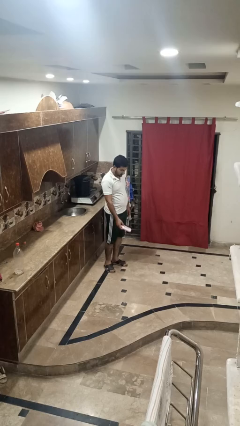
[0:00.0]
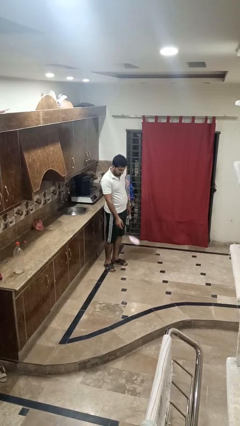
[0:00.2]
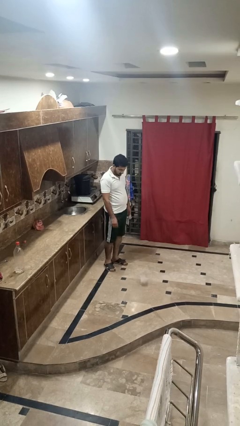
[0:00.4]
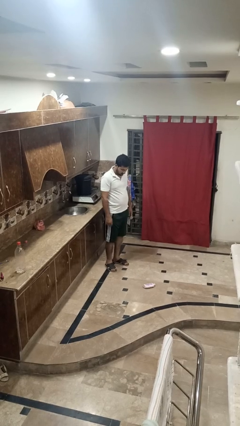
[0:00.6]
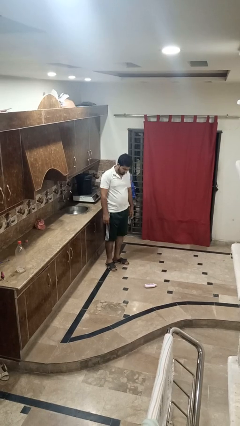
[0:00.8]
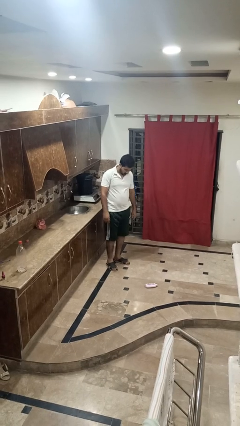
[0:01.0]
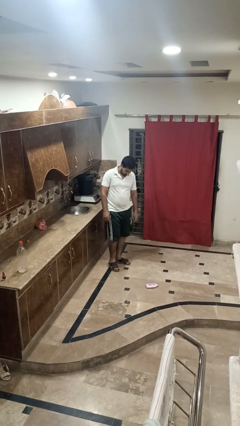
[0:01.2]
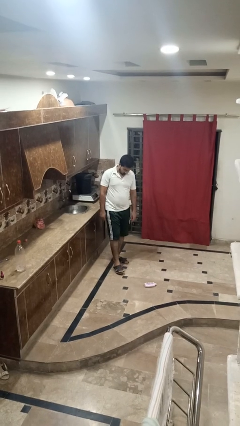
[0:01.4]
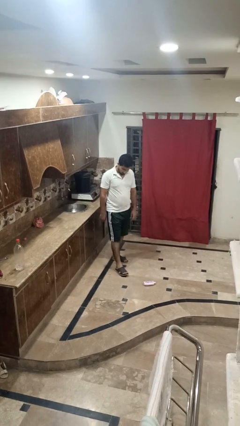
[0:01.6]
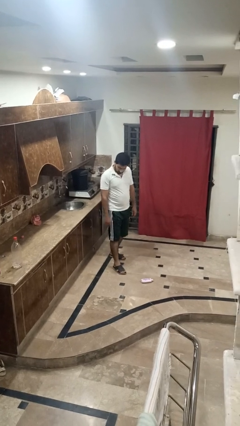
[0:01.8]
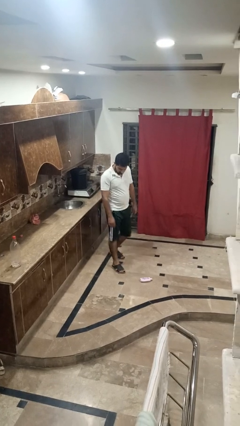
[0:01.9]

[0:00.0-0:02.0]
person throws object to ground

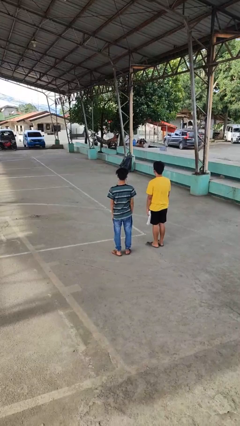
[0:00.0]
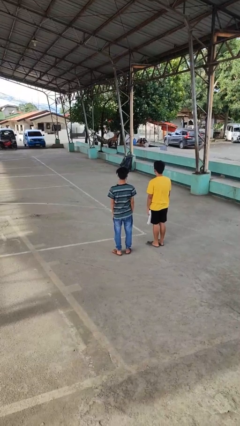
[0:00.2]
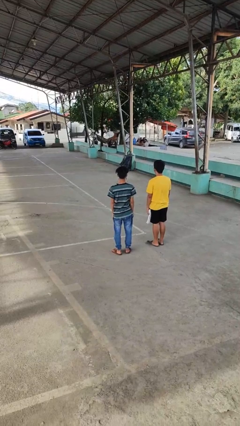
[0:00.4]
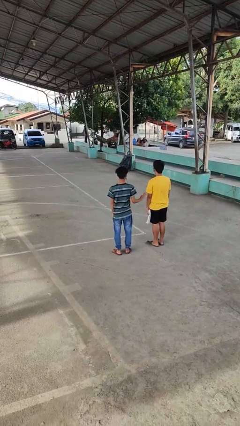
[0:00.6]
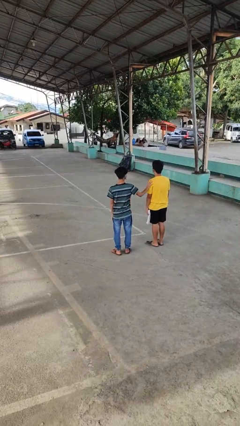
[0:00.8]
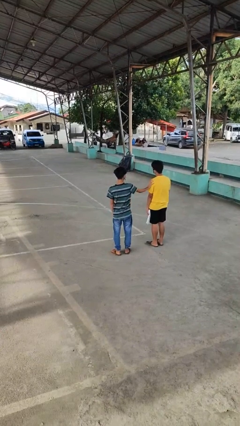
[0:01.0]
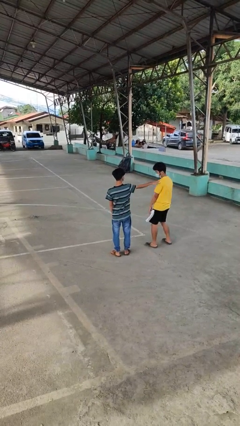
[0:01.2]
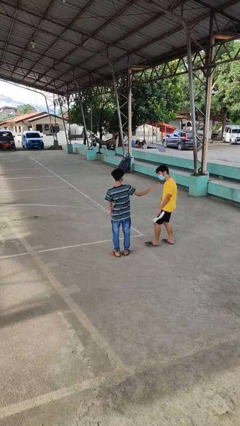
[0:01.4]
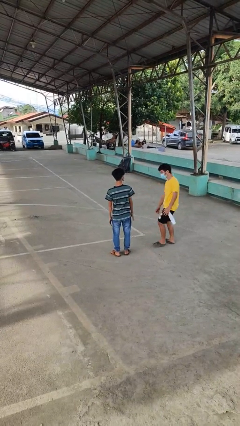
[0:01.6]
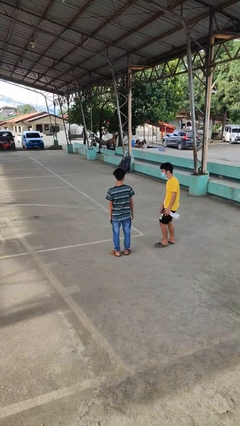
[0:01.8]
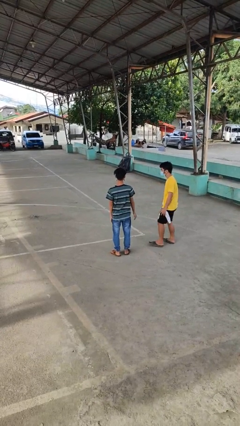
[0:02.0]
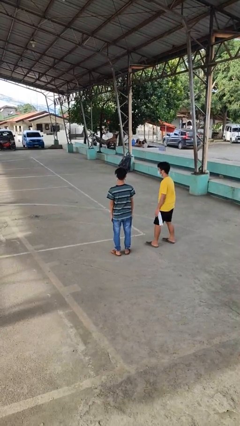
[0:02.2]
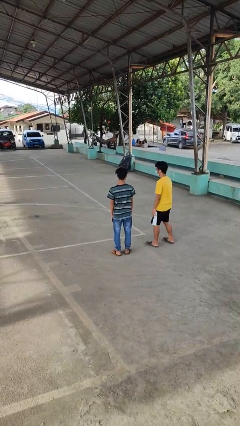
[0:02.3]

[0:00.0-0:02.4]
person shoves person

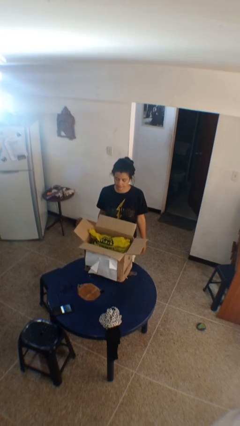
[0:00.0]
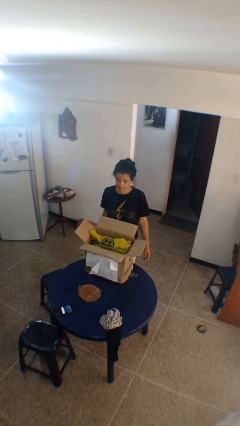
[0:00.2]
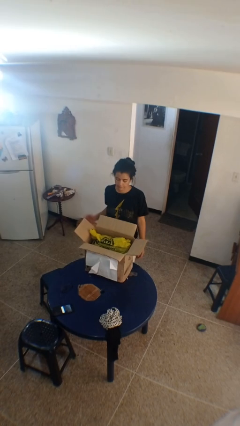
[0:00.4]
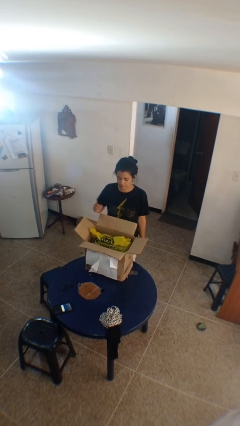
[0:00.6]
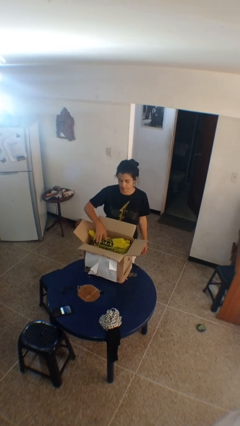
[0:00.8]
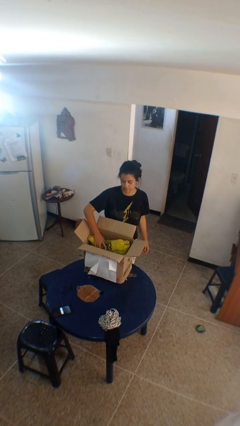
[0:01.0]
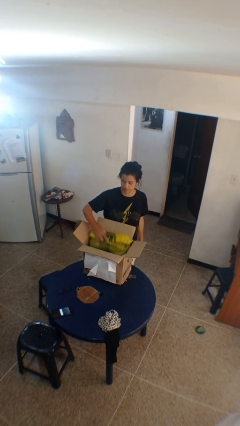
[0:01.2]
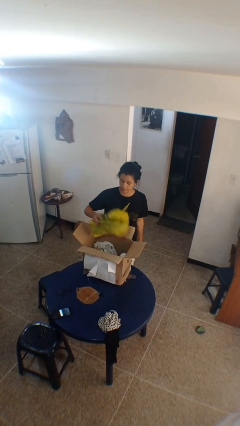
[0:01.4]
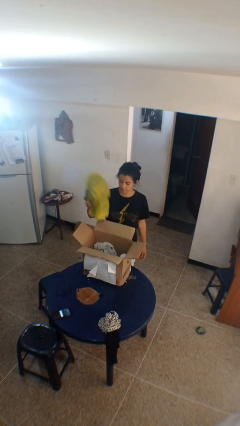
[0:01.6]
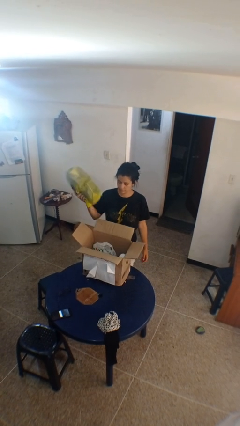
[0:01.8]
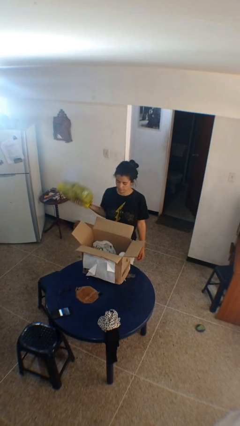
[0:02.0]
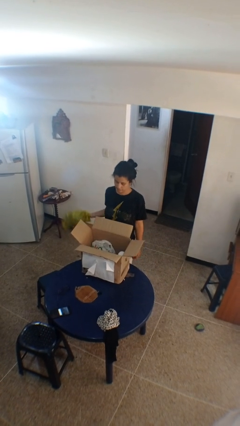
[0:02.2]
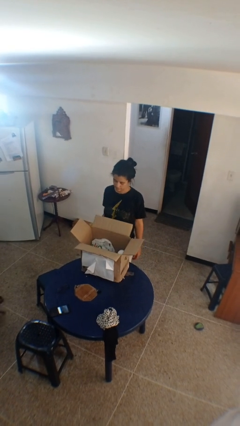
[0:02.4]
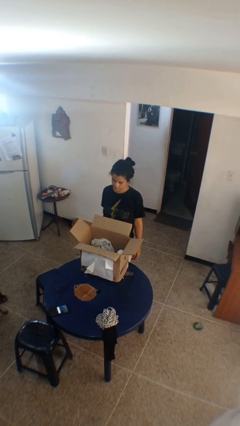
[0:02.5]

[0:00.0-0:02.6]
person takes object from box

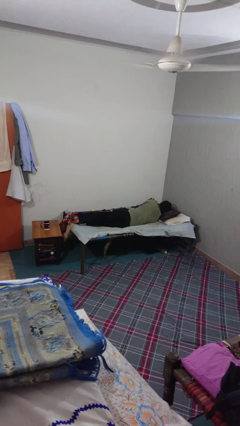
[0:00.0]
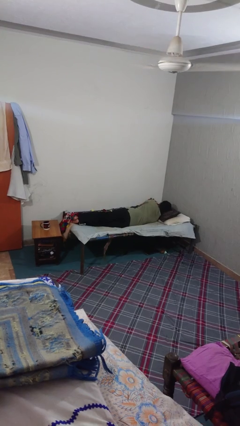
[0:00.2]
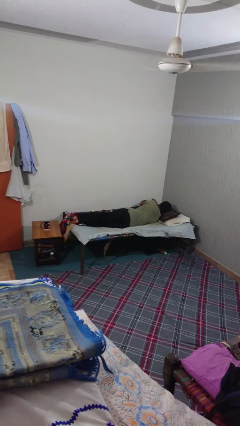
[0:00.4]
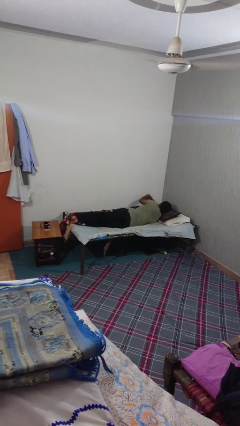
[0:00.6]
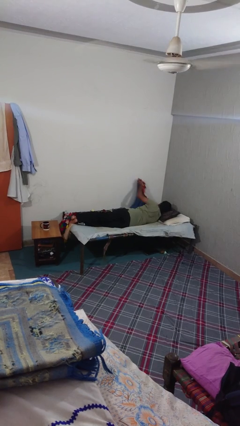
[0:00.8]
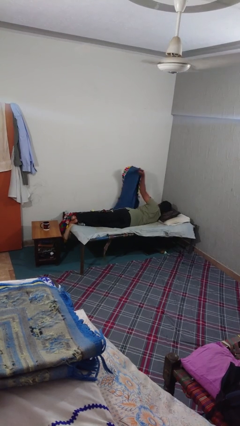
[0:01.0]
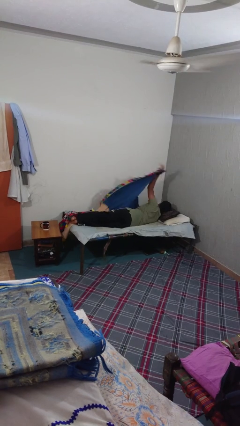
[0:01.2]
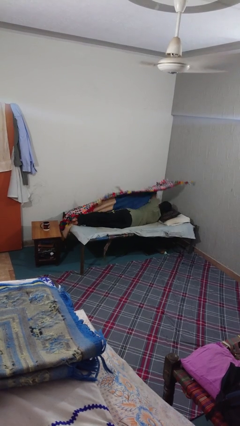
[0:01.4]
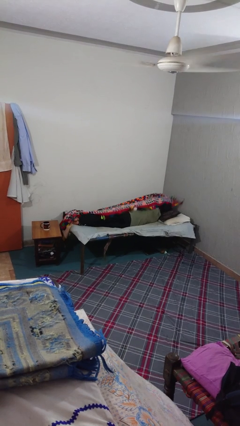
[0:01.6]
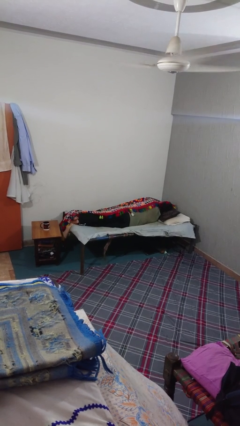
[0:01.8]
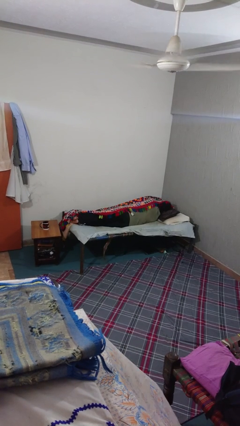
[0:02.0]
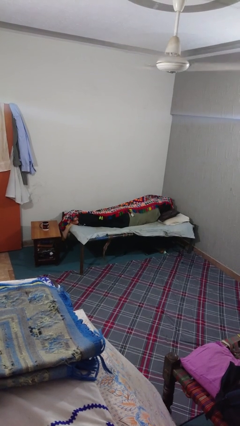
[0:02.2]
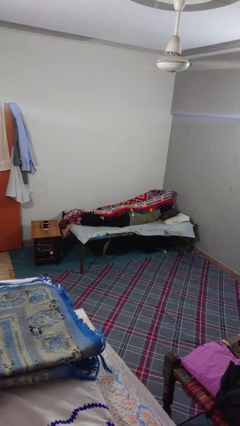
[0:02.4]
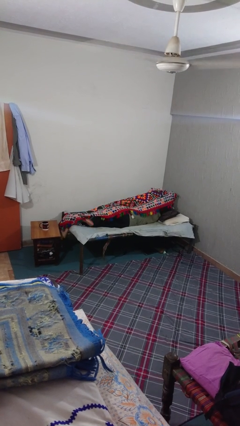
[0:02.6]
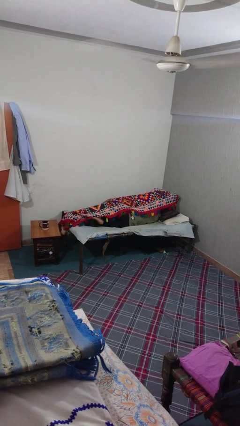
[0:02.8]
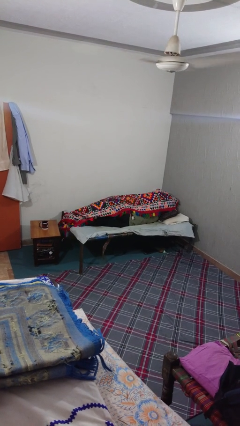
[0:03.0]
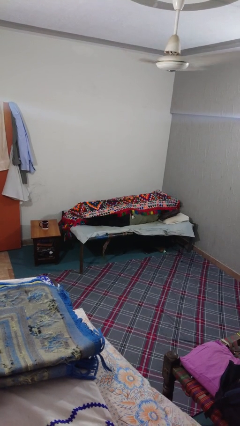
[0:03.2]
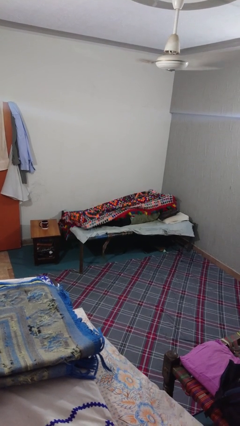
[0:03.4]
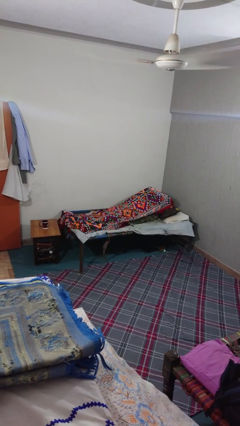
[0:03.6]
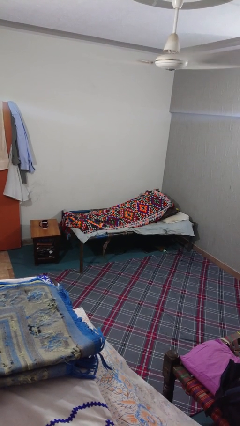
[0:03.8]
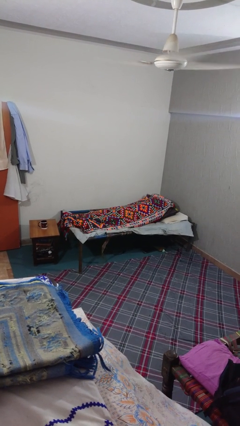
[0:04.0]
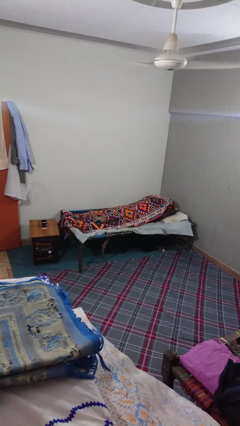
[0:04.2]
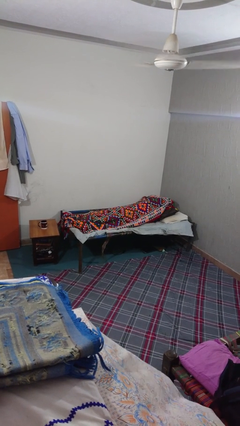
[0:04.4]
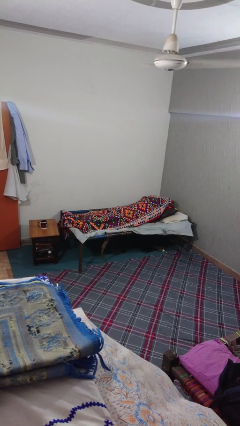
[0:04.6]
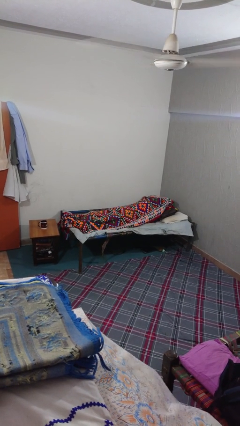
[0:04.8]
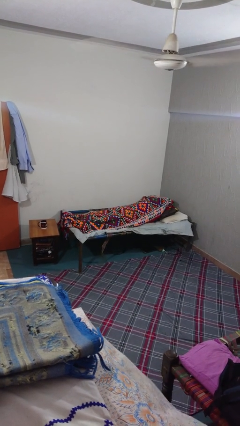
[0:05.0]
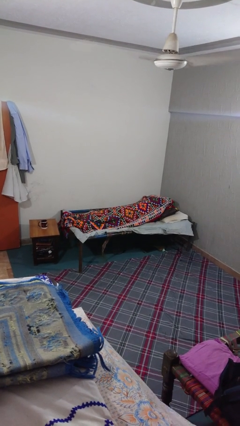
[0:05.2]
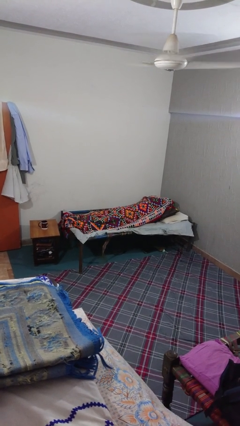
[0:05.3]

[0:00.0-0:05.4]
person covers with blanket

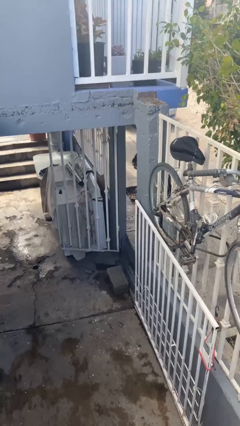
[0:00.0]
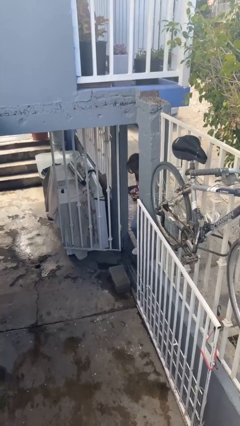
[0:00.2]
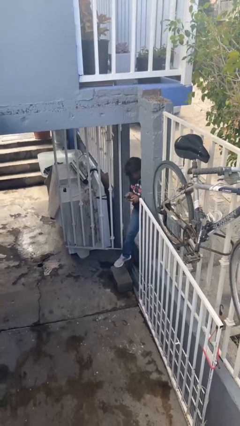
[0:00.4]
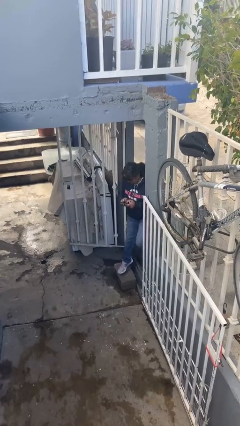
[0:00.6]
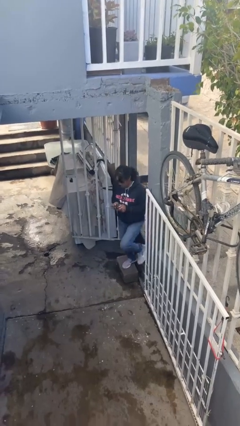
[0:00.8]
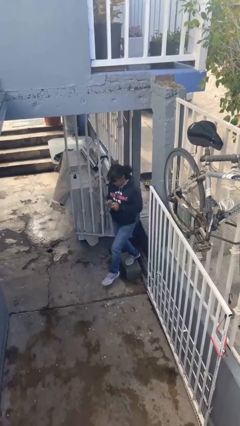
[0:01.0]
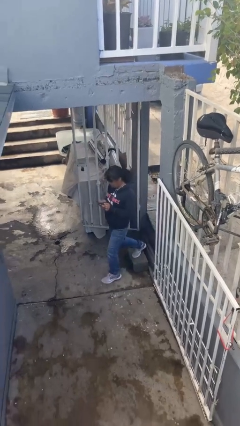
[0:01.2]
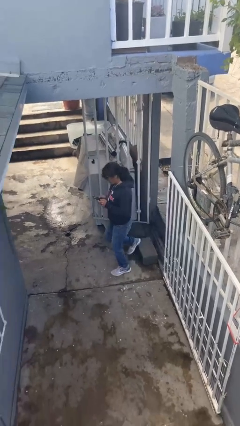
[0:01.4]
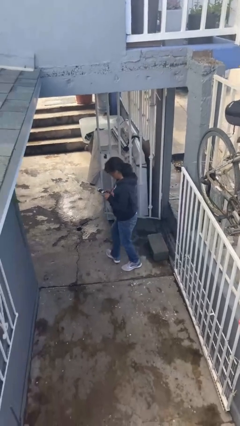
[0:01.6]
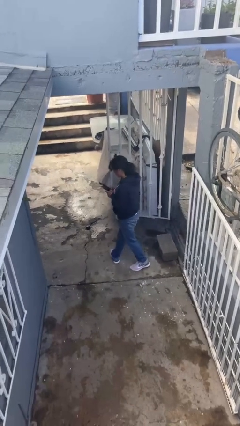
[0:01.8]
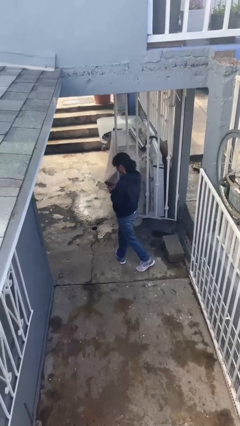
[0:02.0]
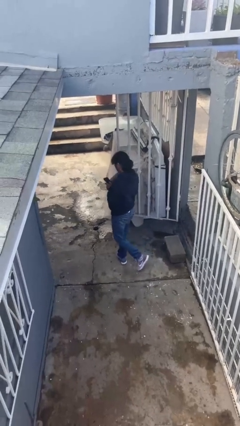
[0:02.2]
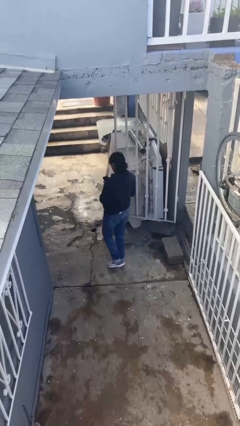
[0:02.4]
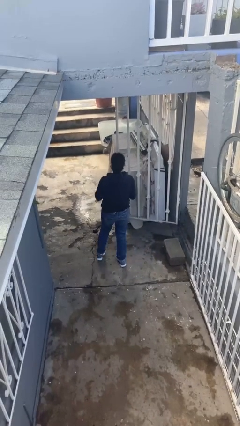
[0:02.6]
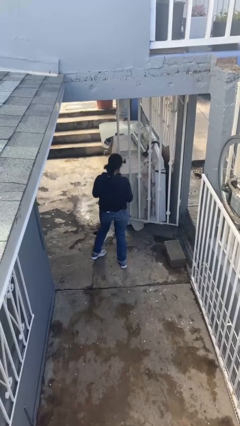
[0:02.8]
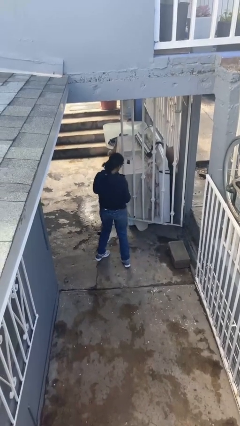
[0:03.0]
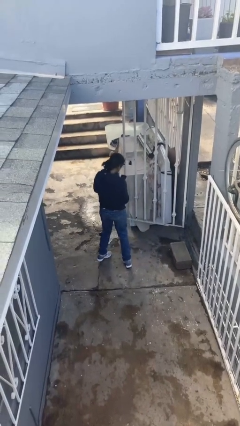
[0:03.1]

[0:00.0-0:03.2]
person enters scene through structure

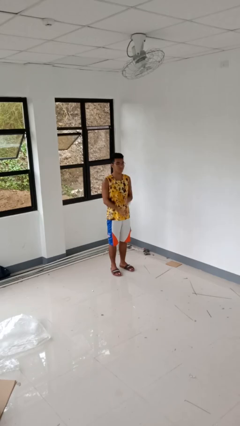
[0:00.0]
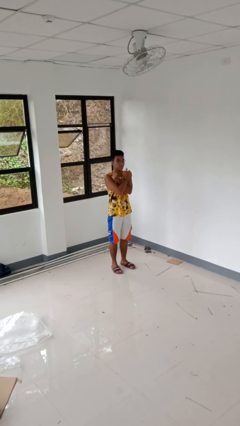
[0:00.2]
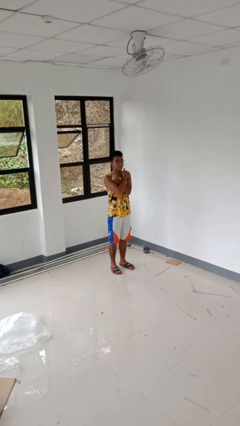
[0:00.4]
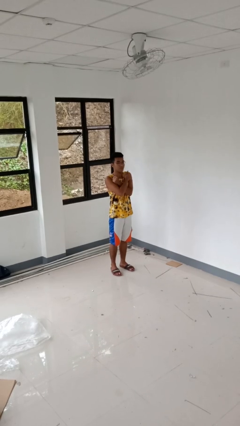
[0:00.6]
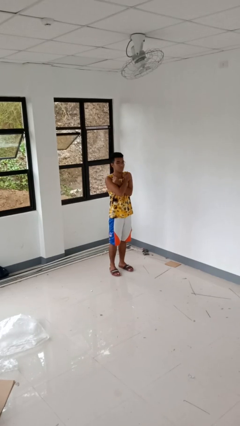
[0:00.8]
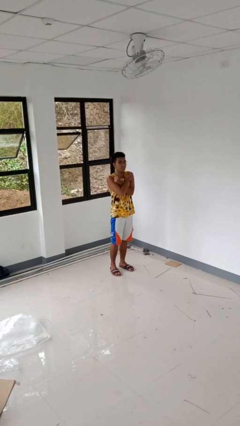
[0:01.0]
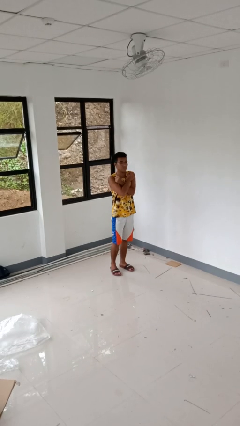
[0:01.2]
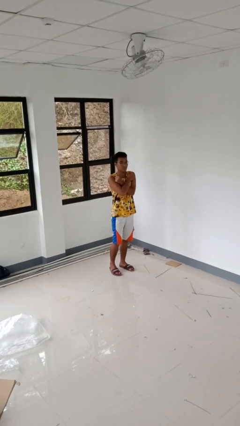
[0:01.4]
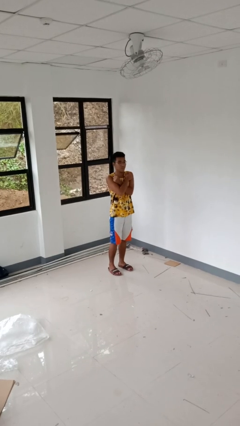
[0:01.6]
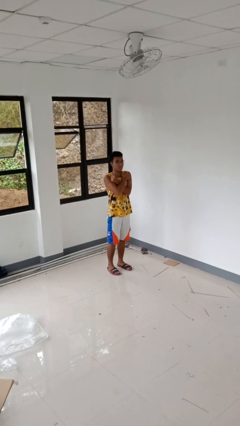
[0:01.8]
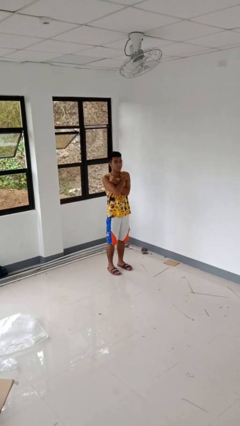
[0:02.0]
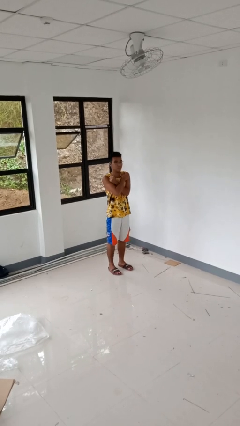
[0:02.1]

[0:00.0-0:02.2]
person gestures arms x
